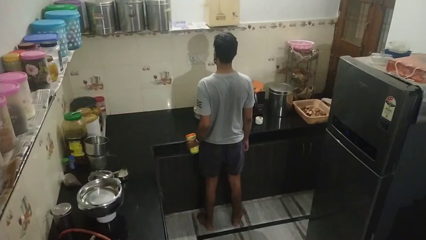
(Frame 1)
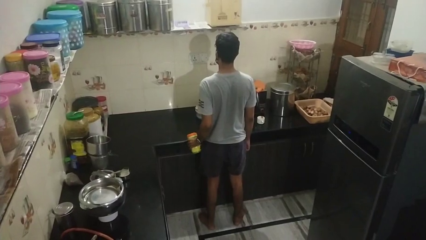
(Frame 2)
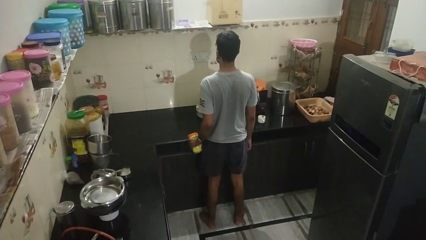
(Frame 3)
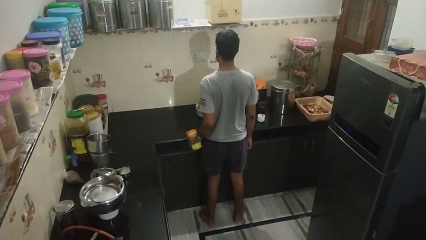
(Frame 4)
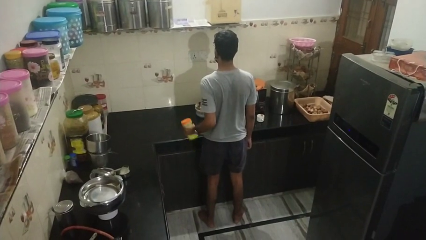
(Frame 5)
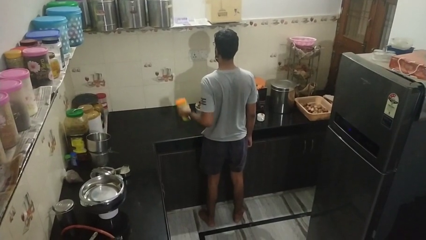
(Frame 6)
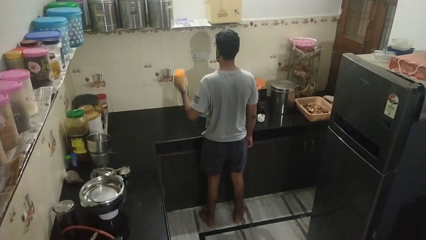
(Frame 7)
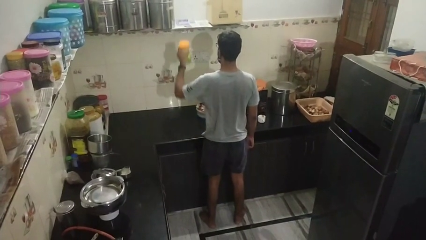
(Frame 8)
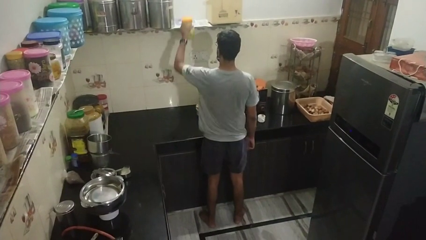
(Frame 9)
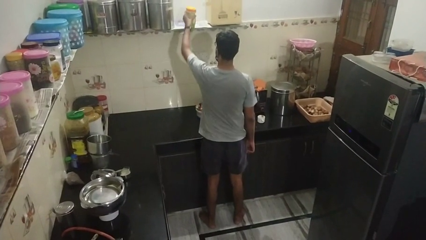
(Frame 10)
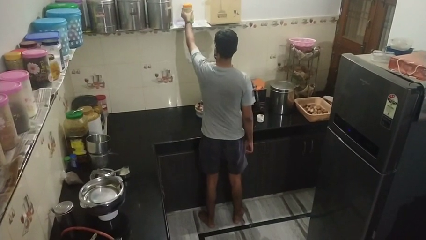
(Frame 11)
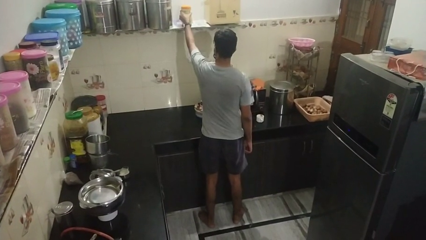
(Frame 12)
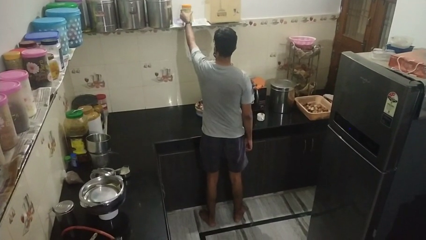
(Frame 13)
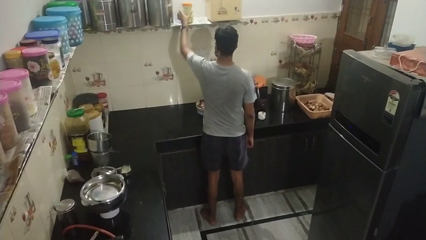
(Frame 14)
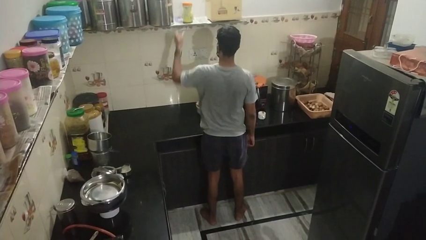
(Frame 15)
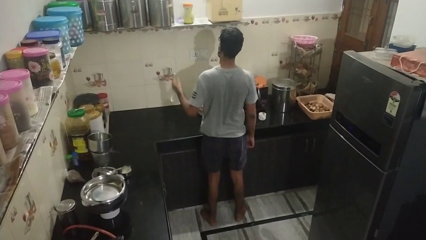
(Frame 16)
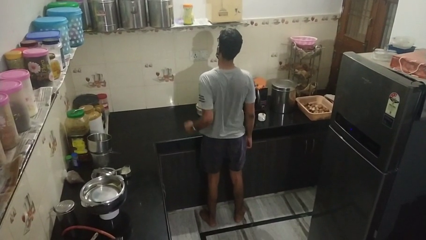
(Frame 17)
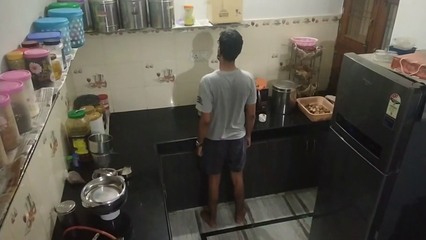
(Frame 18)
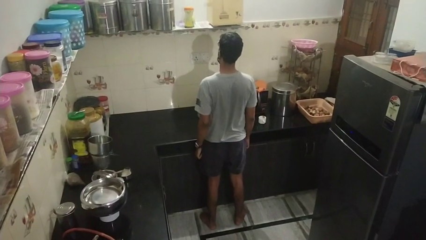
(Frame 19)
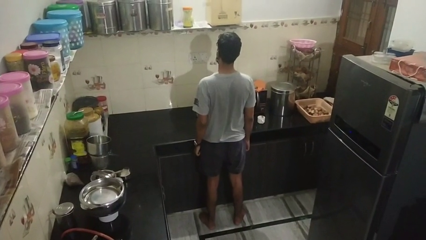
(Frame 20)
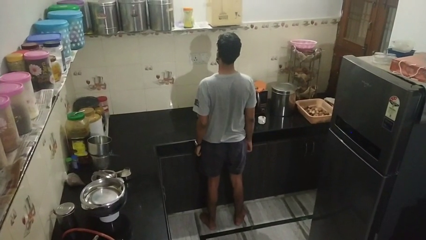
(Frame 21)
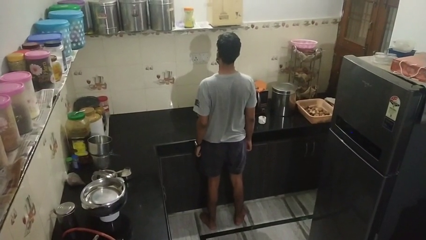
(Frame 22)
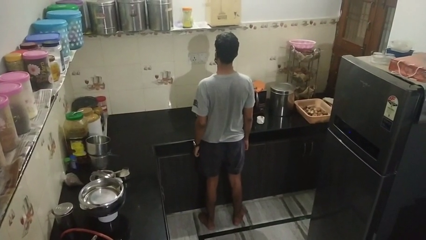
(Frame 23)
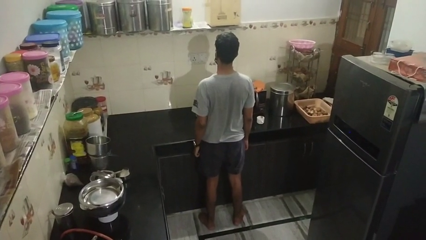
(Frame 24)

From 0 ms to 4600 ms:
person puts down object on shelf

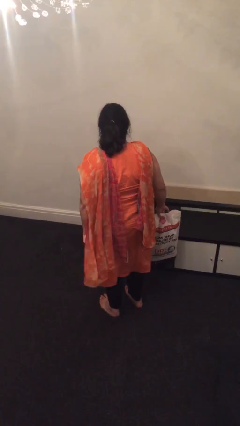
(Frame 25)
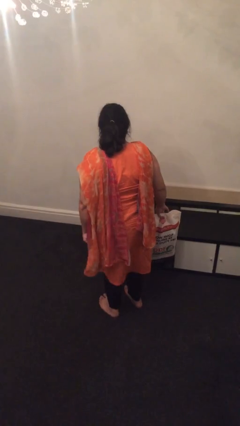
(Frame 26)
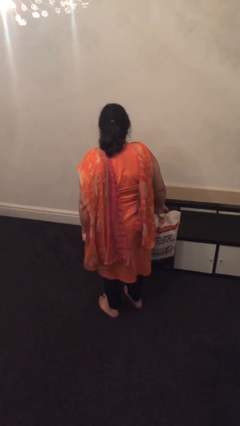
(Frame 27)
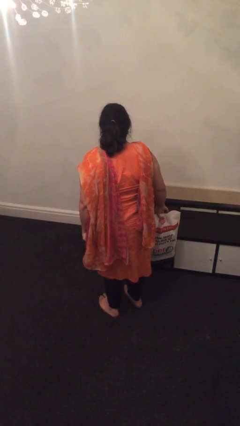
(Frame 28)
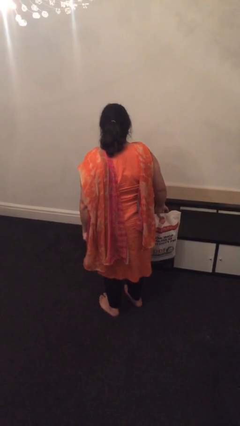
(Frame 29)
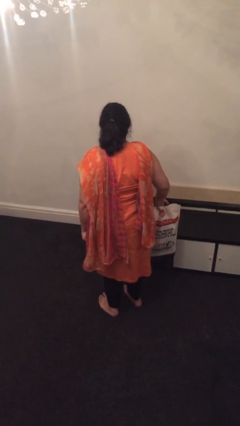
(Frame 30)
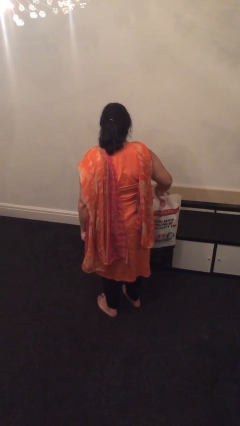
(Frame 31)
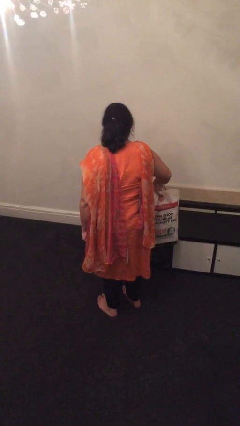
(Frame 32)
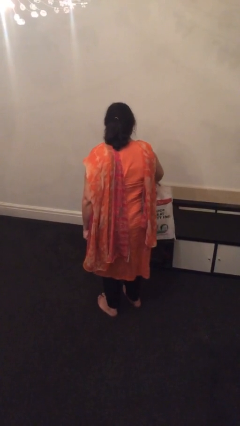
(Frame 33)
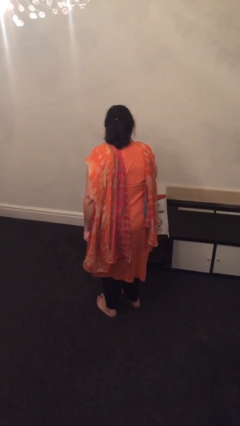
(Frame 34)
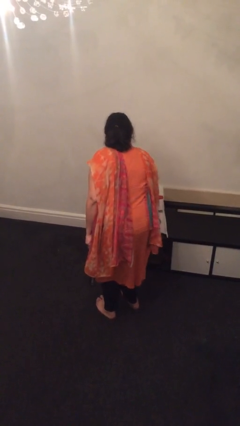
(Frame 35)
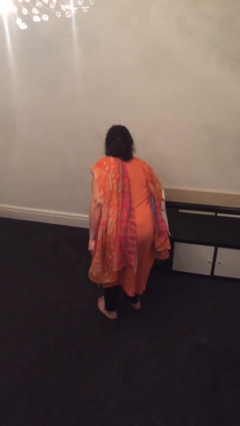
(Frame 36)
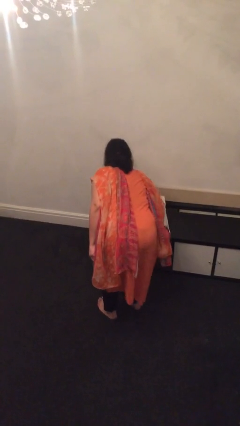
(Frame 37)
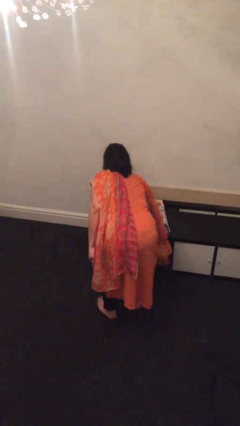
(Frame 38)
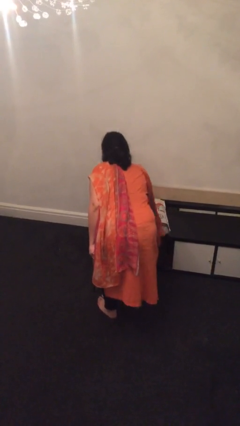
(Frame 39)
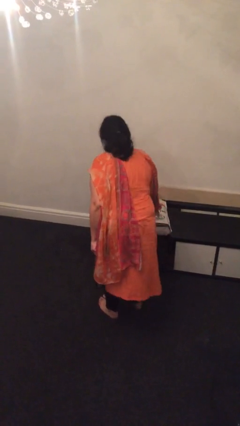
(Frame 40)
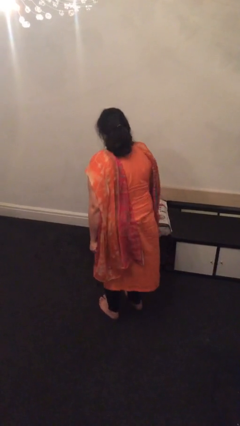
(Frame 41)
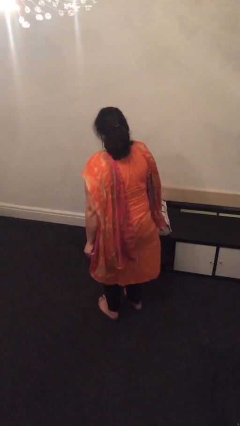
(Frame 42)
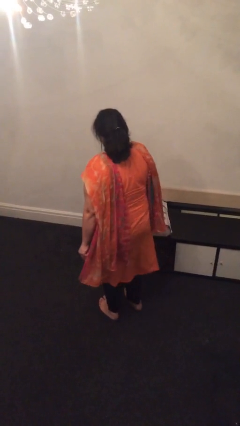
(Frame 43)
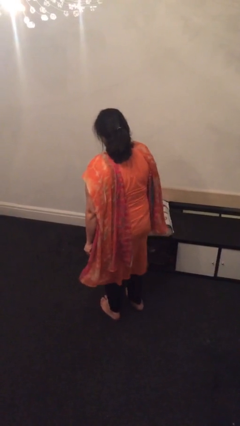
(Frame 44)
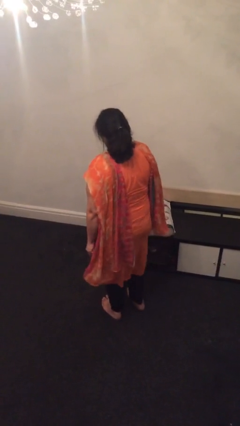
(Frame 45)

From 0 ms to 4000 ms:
person puts down object on table

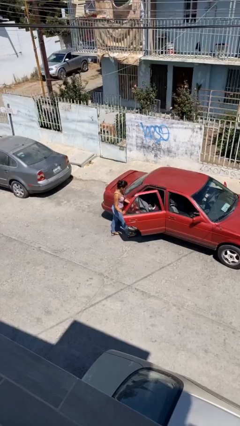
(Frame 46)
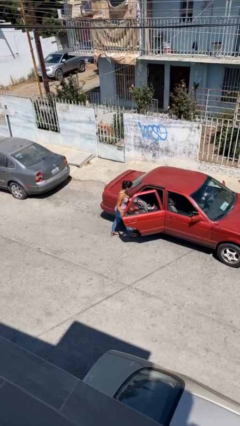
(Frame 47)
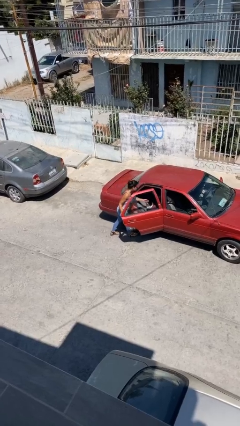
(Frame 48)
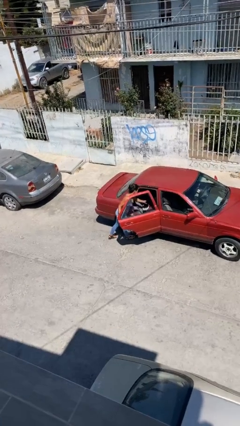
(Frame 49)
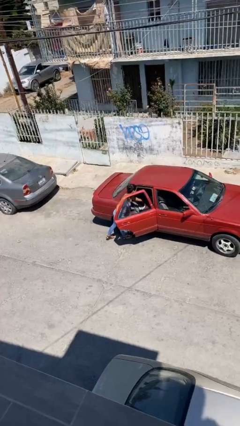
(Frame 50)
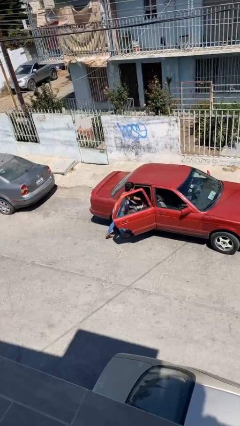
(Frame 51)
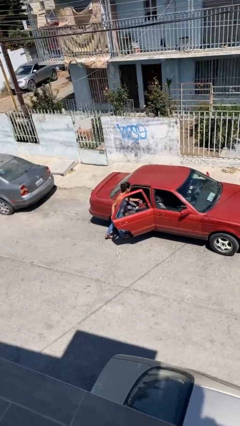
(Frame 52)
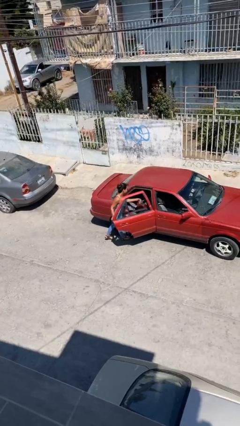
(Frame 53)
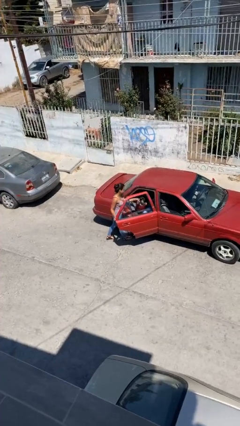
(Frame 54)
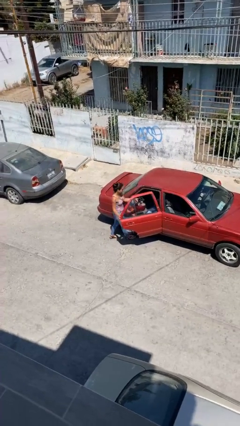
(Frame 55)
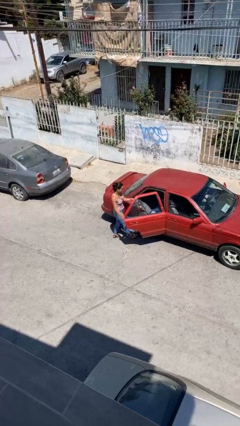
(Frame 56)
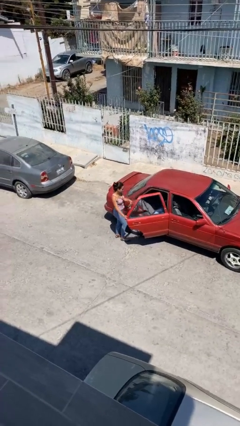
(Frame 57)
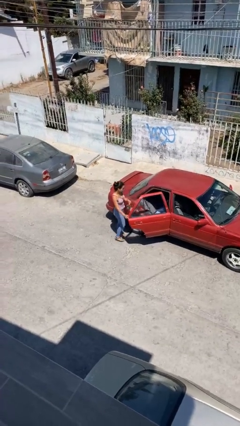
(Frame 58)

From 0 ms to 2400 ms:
person unloads car

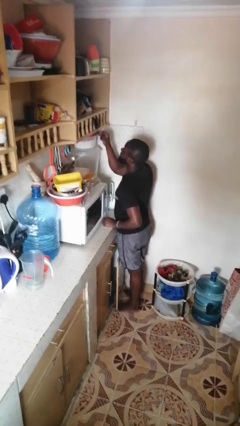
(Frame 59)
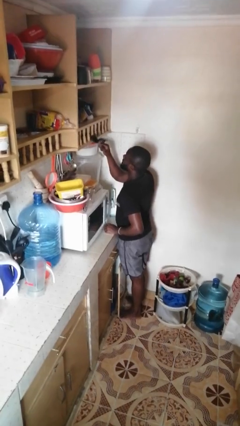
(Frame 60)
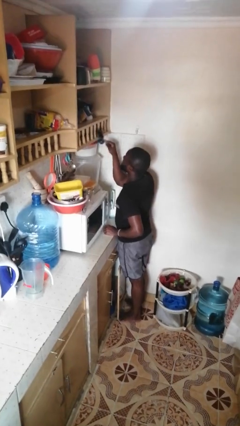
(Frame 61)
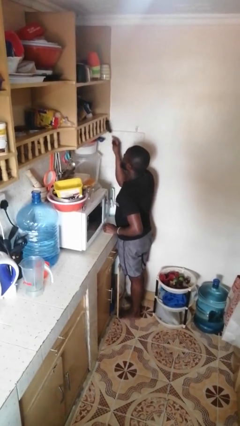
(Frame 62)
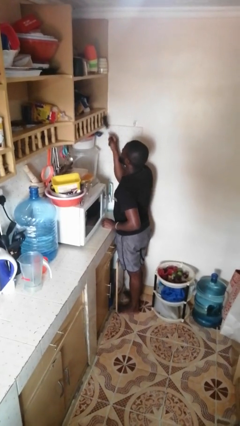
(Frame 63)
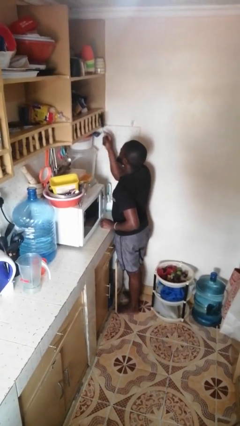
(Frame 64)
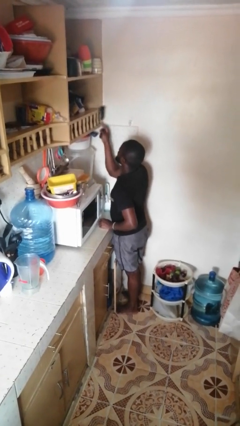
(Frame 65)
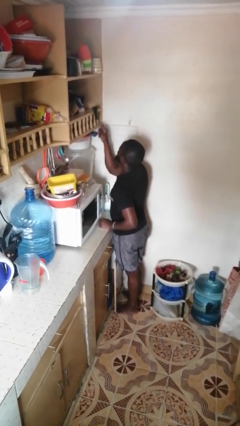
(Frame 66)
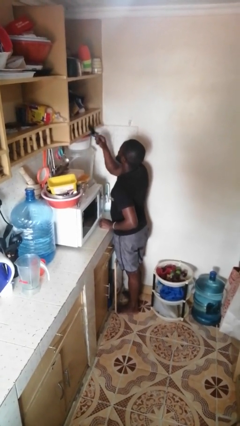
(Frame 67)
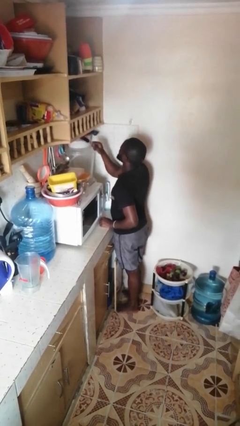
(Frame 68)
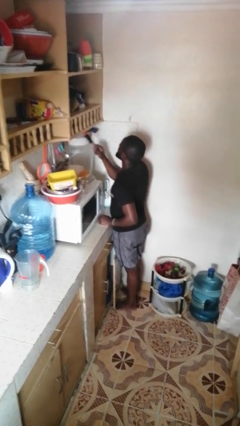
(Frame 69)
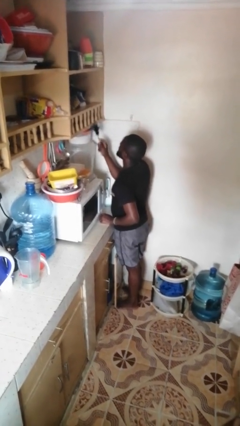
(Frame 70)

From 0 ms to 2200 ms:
person dusts furniture

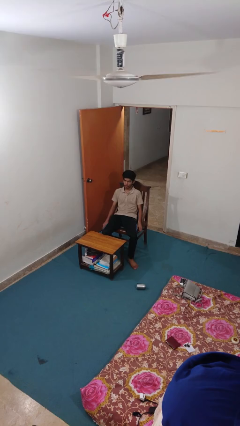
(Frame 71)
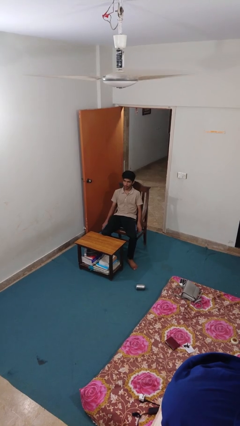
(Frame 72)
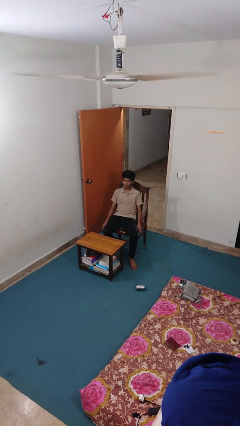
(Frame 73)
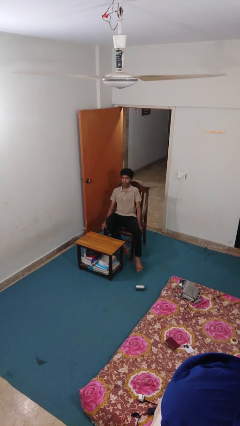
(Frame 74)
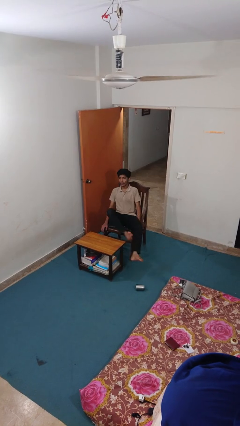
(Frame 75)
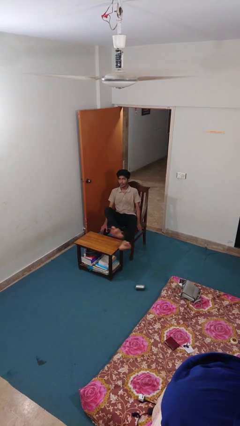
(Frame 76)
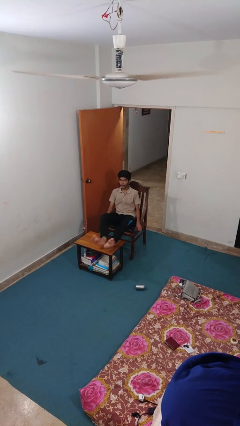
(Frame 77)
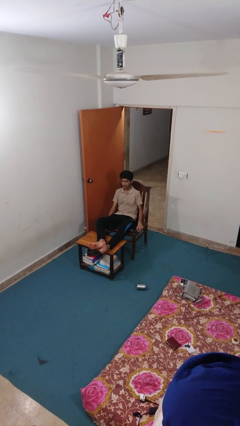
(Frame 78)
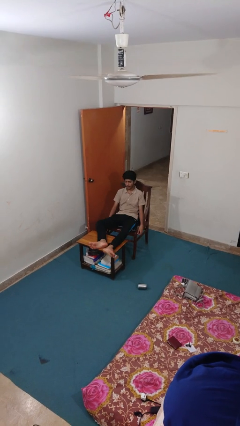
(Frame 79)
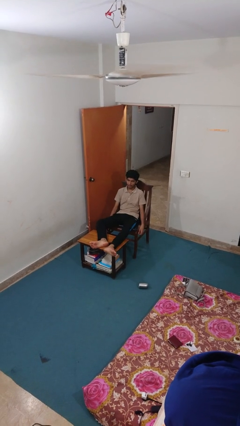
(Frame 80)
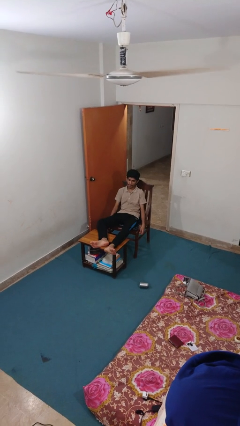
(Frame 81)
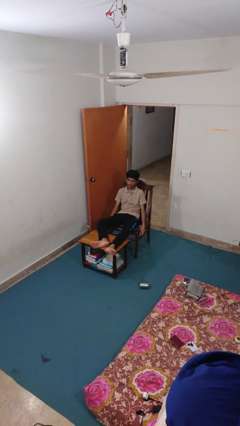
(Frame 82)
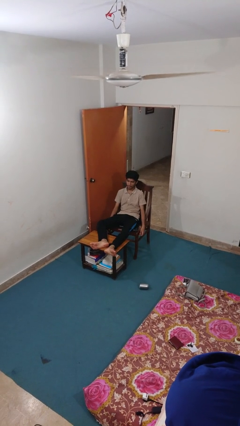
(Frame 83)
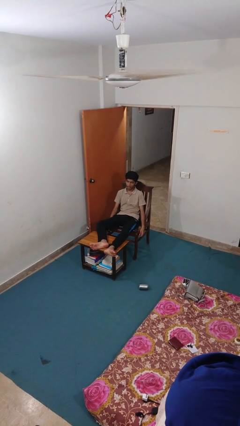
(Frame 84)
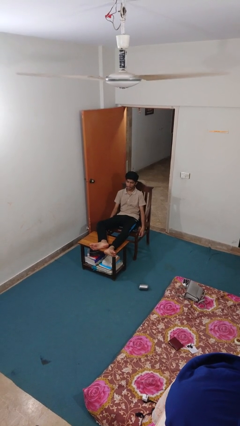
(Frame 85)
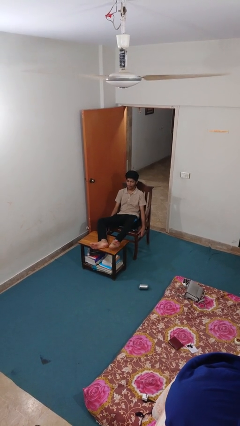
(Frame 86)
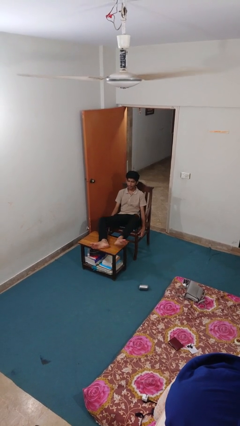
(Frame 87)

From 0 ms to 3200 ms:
person puts feet up

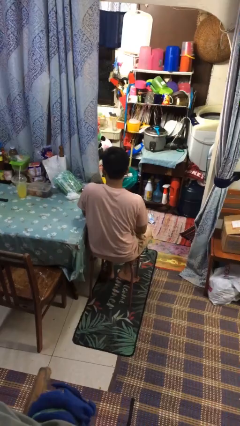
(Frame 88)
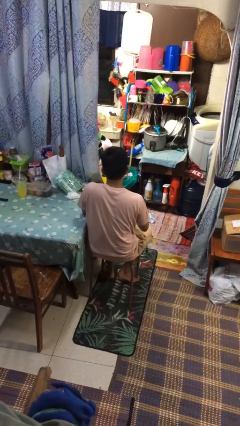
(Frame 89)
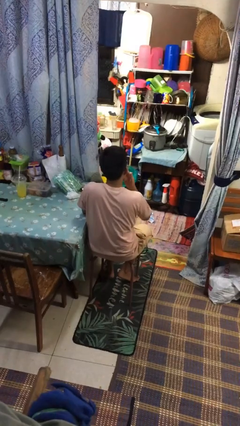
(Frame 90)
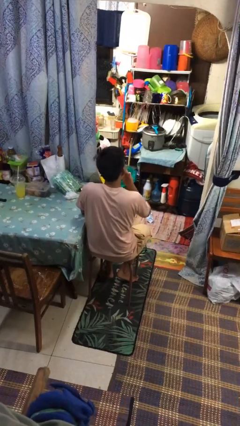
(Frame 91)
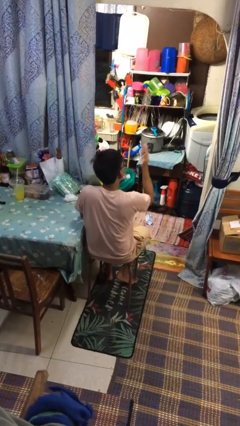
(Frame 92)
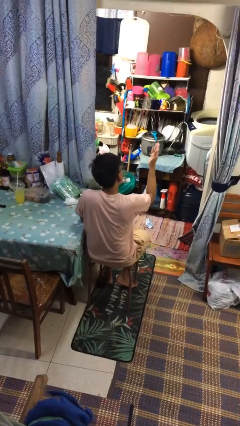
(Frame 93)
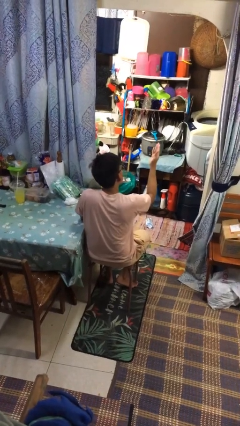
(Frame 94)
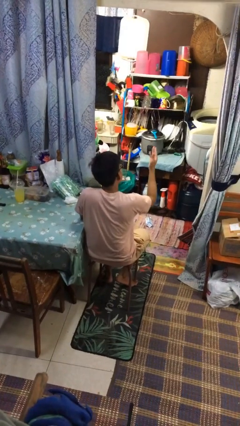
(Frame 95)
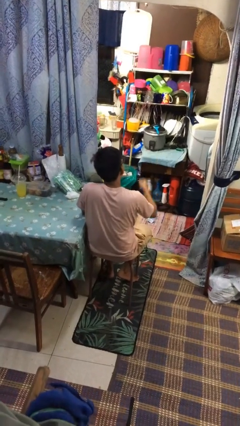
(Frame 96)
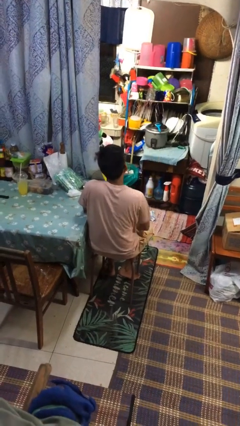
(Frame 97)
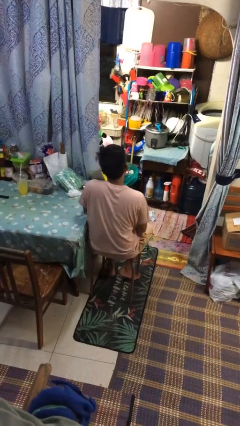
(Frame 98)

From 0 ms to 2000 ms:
person gestures blow kiss
